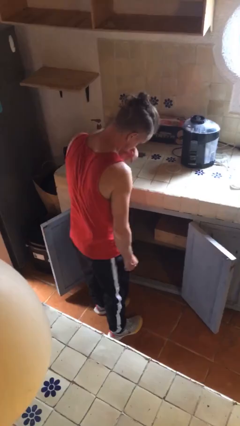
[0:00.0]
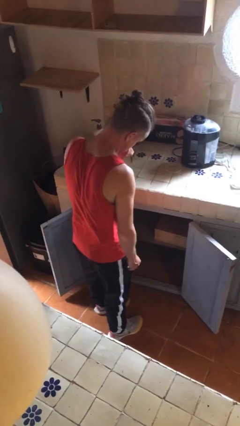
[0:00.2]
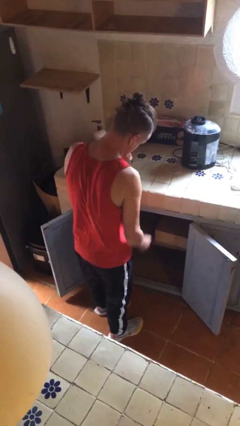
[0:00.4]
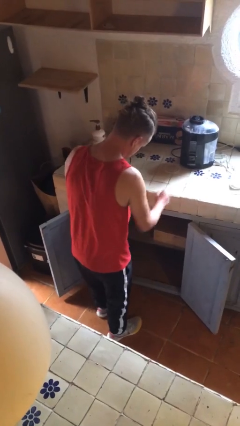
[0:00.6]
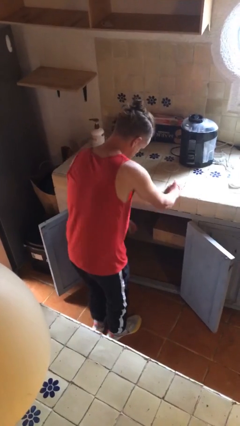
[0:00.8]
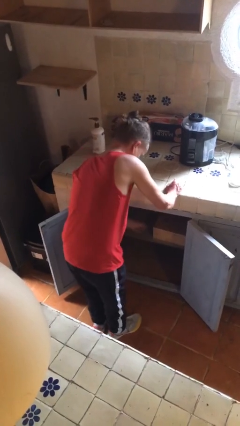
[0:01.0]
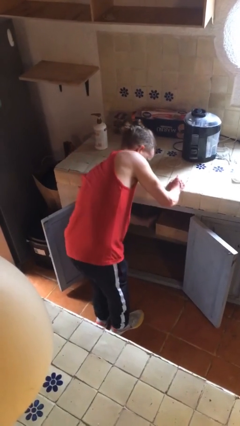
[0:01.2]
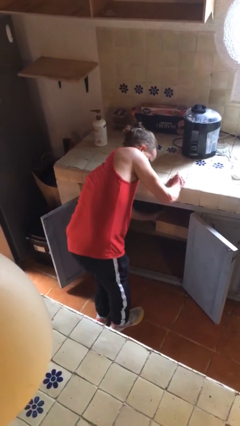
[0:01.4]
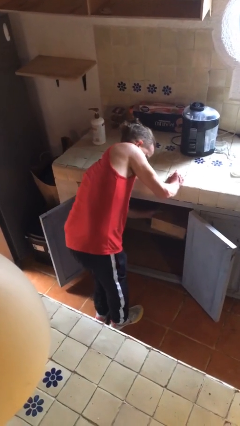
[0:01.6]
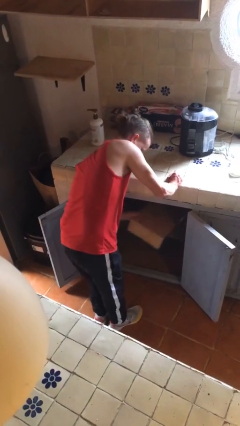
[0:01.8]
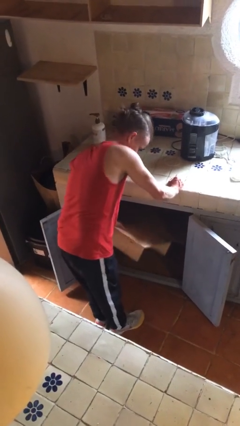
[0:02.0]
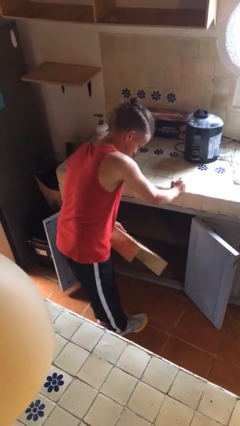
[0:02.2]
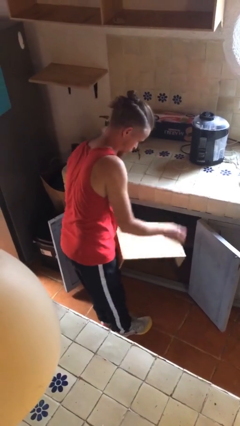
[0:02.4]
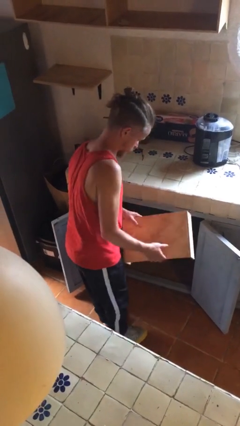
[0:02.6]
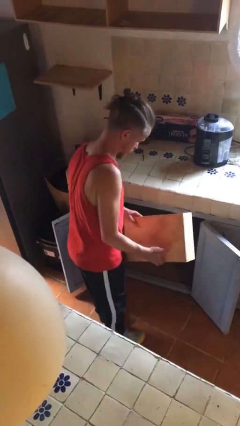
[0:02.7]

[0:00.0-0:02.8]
person picks up object from cabinet

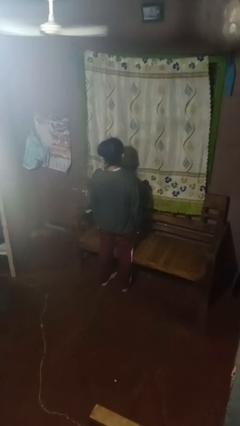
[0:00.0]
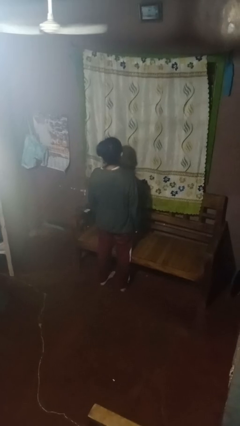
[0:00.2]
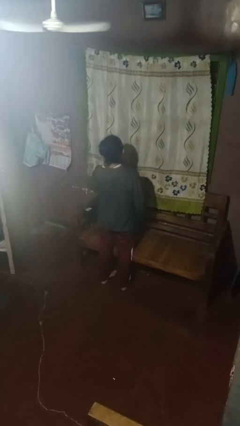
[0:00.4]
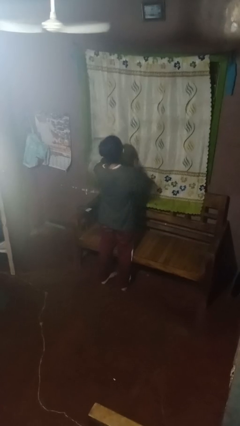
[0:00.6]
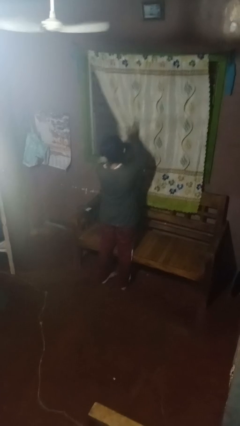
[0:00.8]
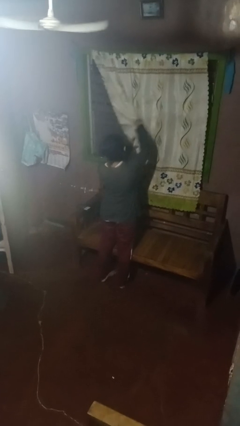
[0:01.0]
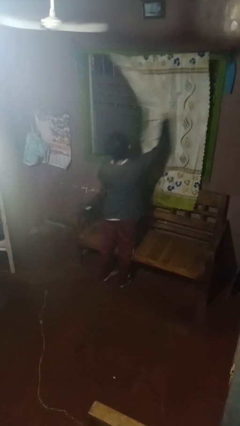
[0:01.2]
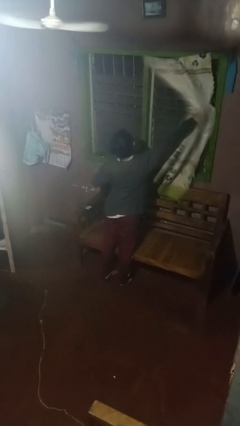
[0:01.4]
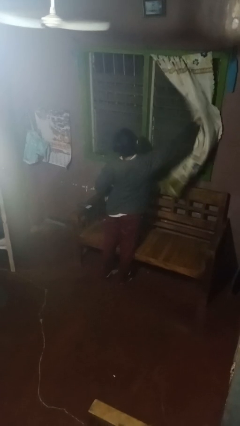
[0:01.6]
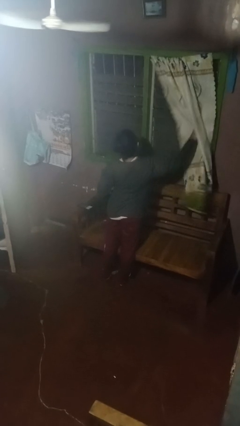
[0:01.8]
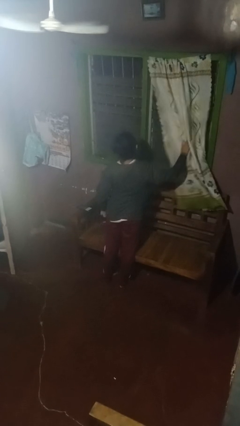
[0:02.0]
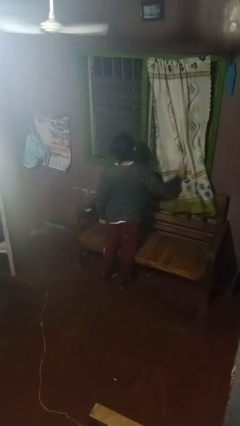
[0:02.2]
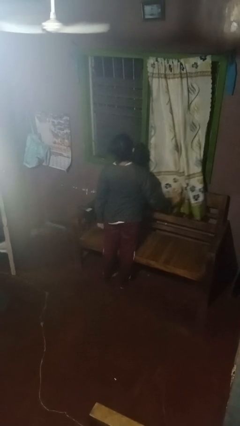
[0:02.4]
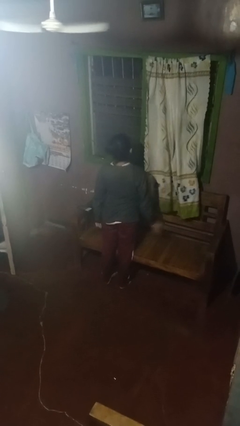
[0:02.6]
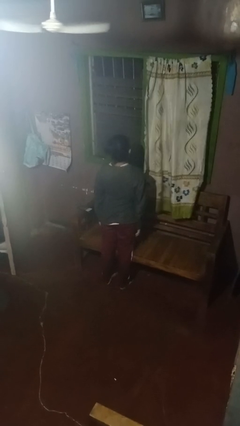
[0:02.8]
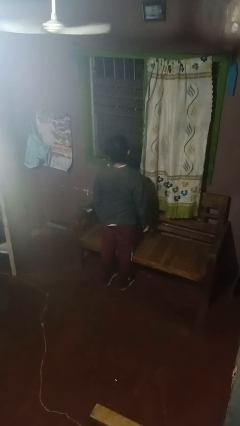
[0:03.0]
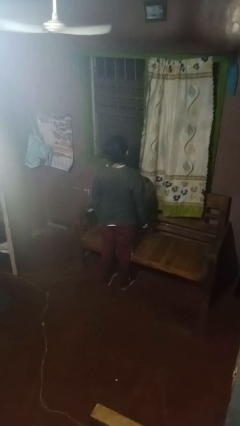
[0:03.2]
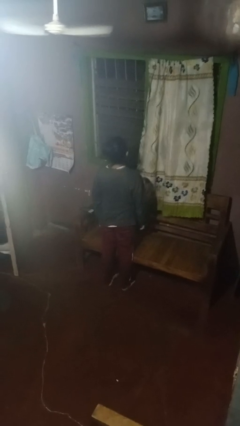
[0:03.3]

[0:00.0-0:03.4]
person opens curtains

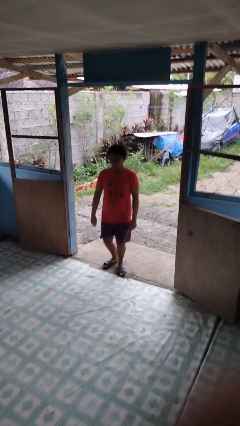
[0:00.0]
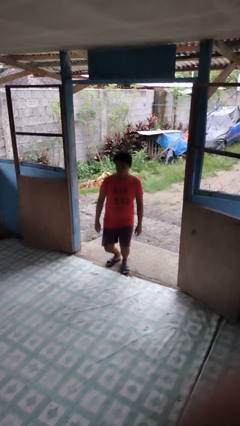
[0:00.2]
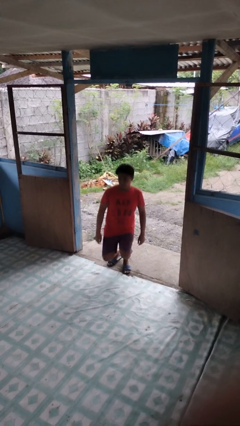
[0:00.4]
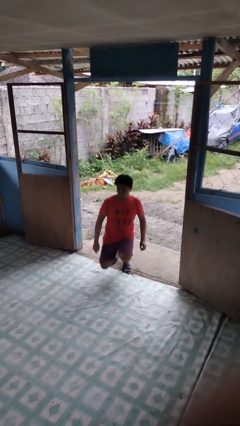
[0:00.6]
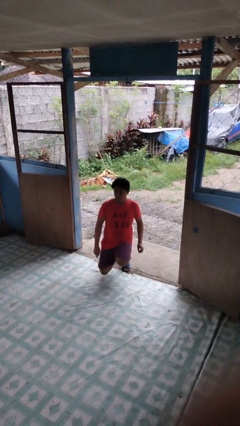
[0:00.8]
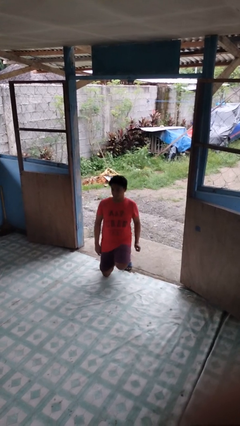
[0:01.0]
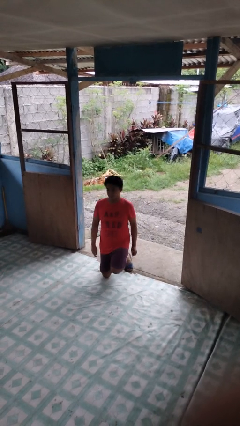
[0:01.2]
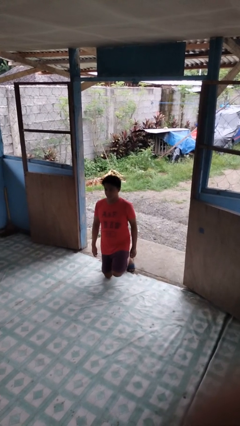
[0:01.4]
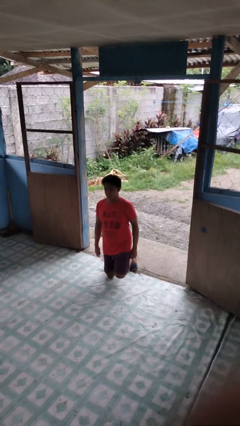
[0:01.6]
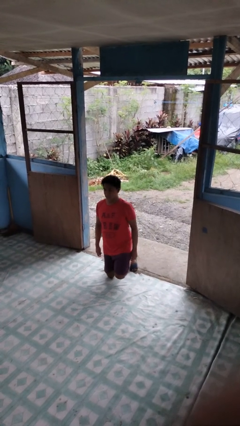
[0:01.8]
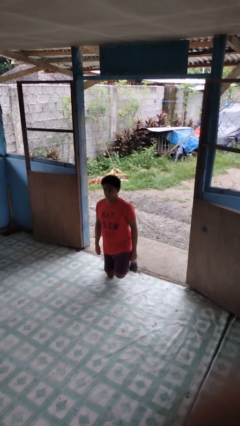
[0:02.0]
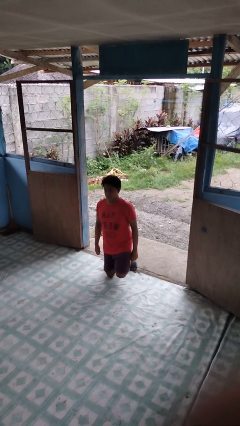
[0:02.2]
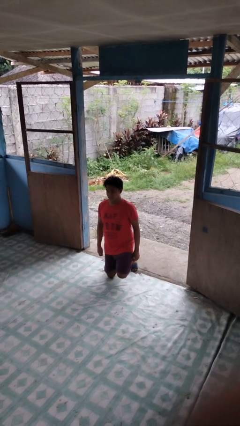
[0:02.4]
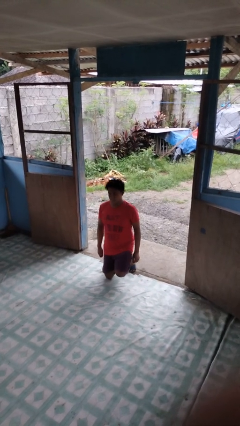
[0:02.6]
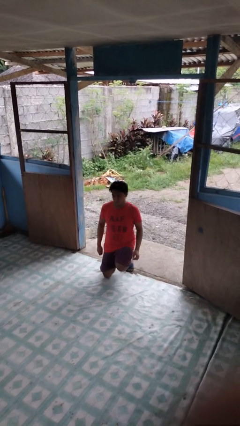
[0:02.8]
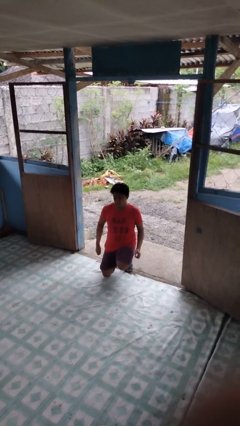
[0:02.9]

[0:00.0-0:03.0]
person kneels

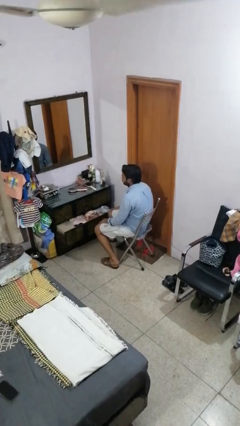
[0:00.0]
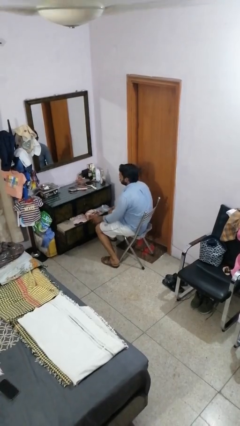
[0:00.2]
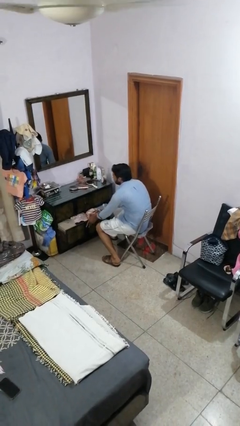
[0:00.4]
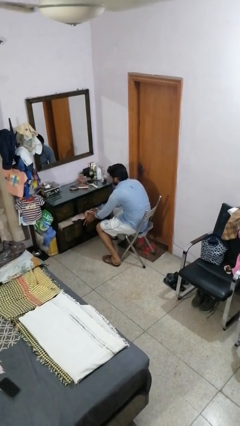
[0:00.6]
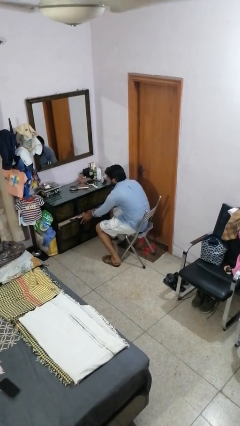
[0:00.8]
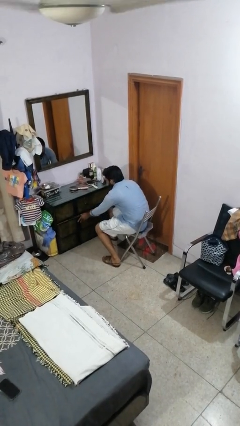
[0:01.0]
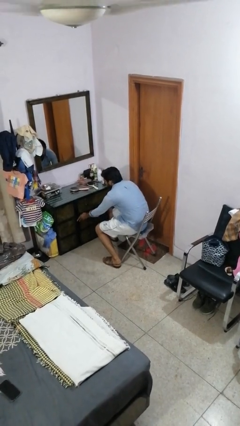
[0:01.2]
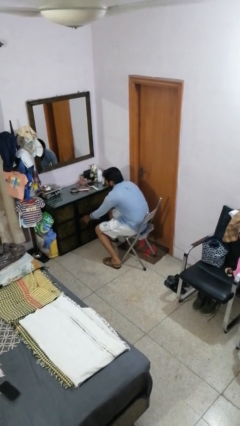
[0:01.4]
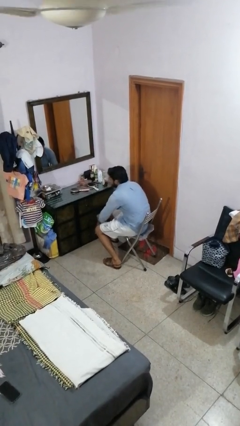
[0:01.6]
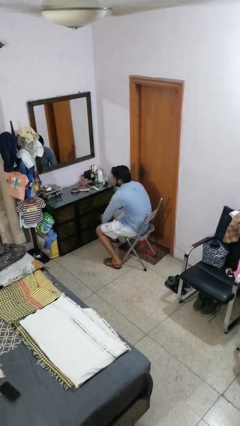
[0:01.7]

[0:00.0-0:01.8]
person closes dresser drawer

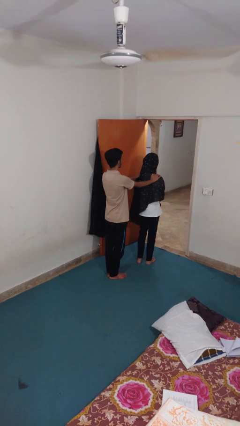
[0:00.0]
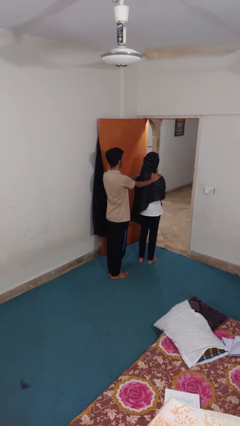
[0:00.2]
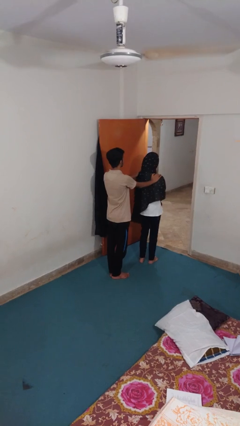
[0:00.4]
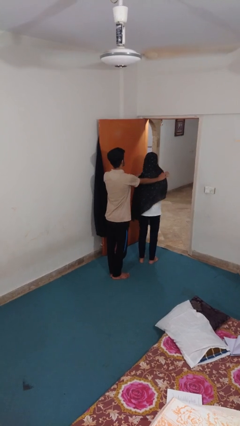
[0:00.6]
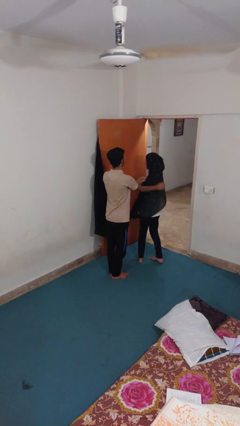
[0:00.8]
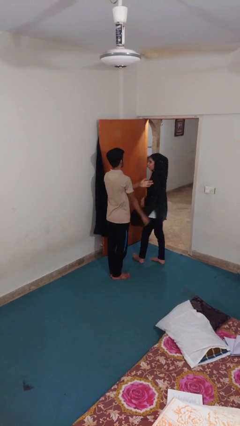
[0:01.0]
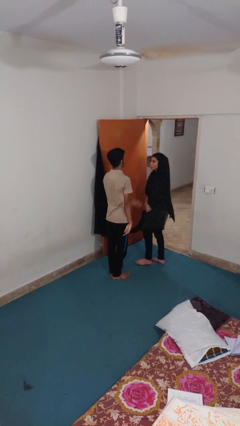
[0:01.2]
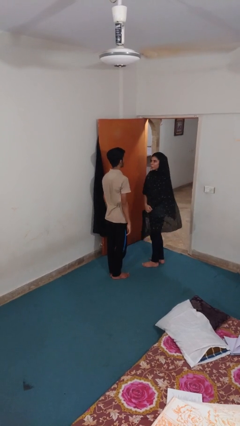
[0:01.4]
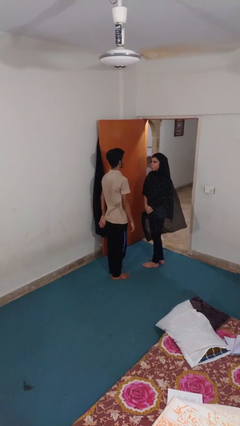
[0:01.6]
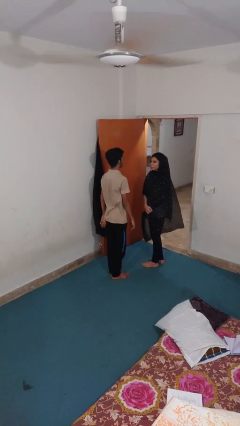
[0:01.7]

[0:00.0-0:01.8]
person spins person around

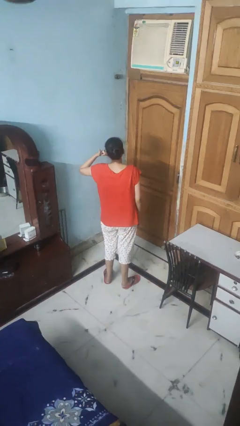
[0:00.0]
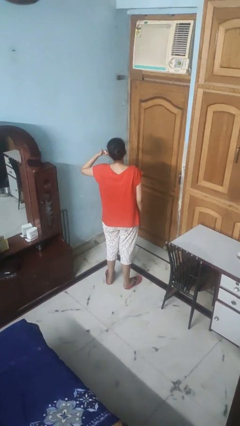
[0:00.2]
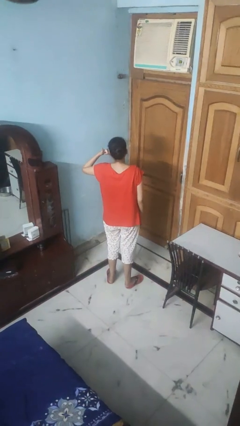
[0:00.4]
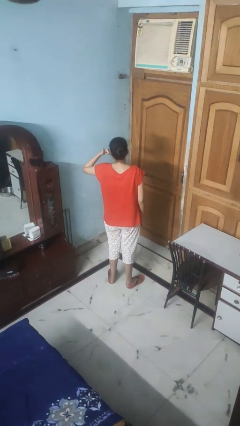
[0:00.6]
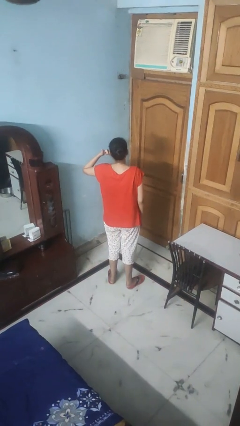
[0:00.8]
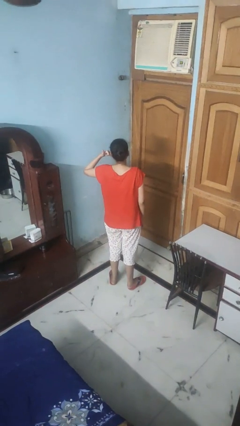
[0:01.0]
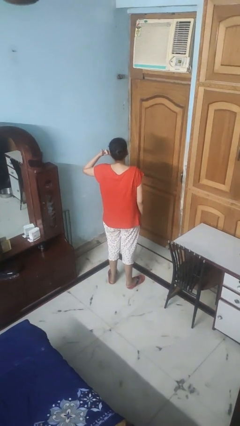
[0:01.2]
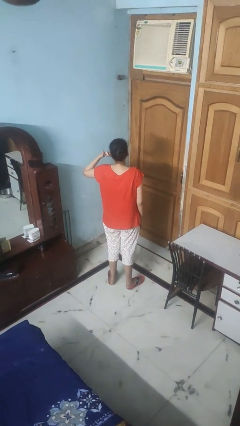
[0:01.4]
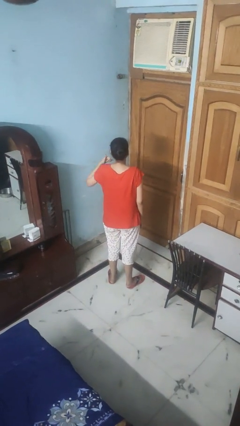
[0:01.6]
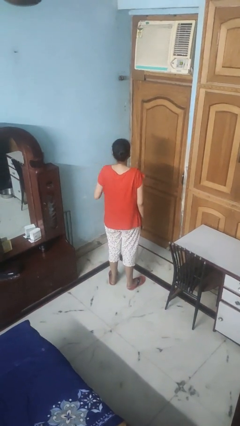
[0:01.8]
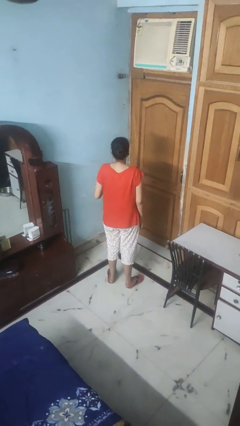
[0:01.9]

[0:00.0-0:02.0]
person gestures call me

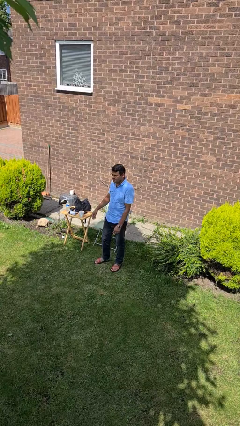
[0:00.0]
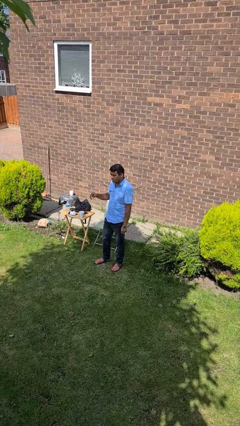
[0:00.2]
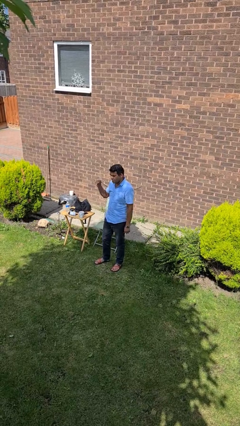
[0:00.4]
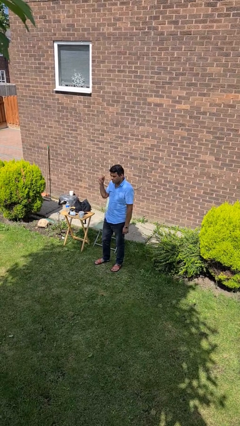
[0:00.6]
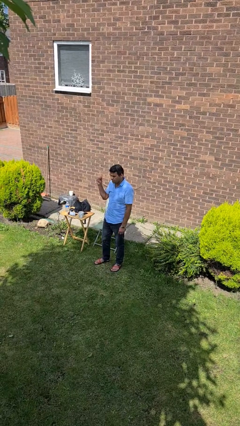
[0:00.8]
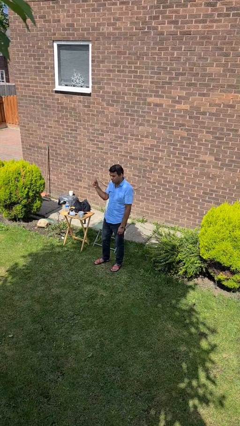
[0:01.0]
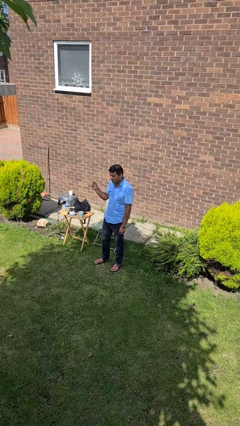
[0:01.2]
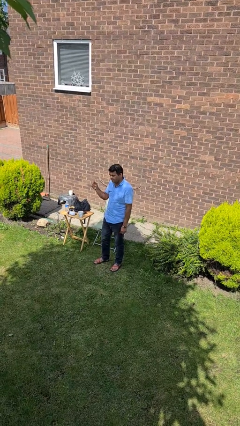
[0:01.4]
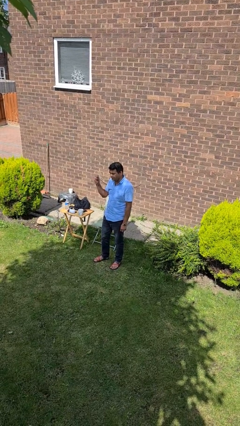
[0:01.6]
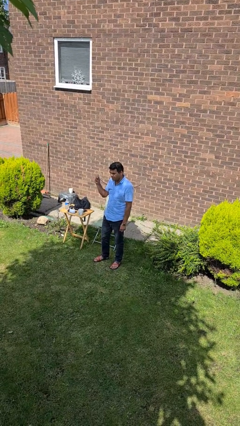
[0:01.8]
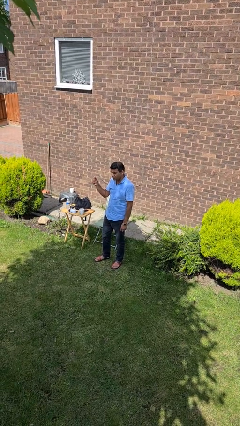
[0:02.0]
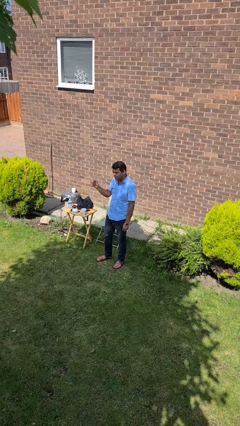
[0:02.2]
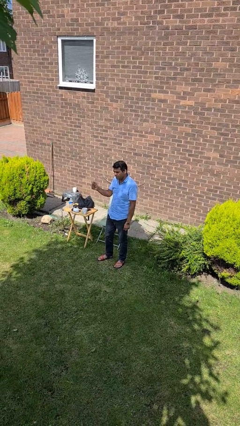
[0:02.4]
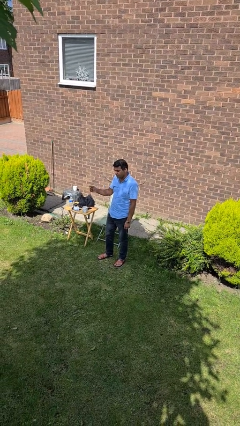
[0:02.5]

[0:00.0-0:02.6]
person snaps fingers
